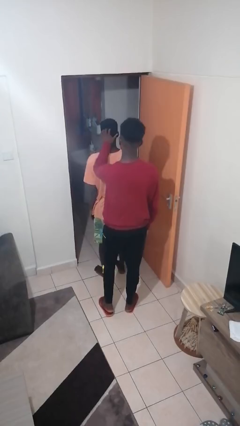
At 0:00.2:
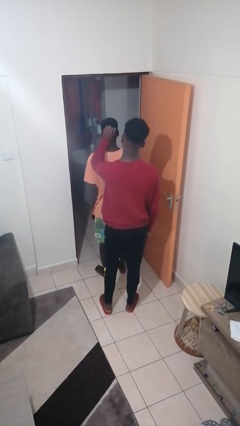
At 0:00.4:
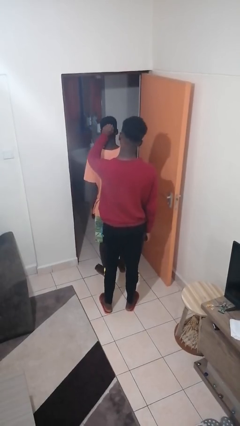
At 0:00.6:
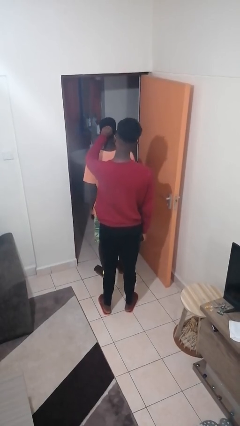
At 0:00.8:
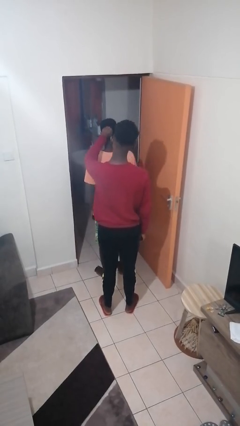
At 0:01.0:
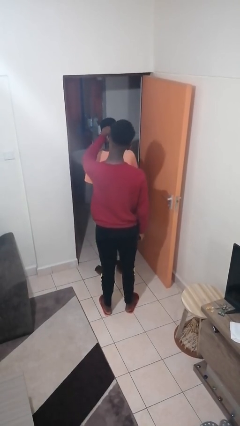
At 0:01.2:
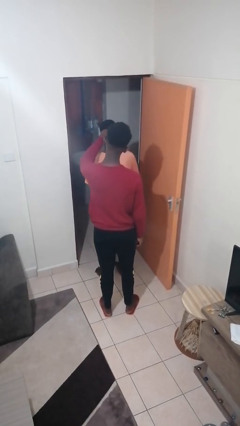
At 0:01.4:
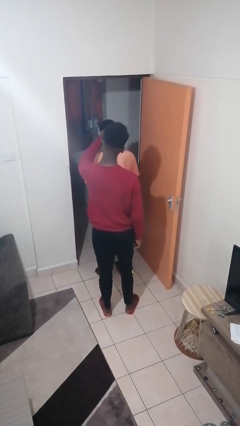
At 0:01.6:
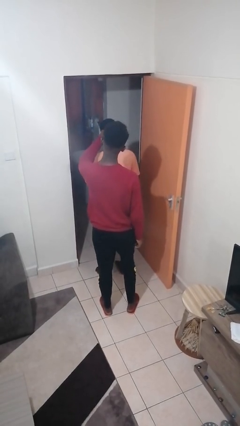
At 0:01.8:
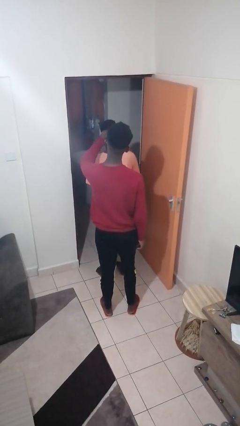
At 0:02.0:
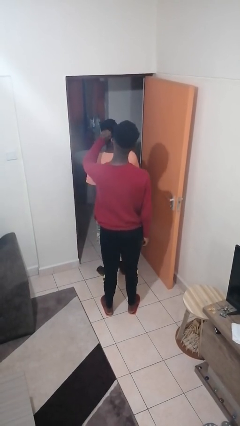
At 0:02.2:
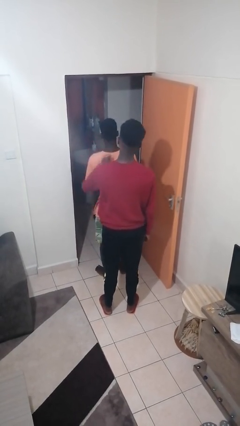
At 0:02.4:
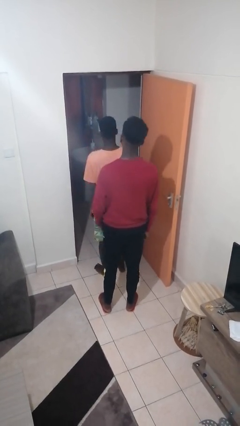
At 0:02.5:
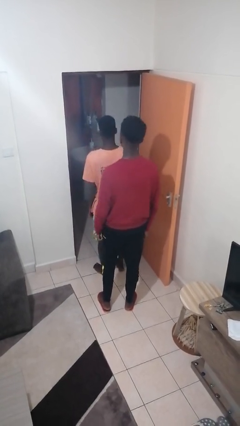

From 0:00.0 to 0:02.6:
person grabs person by hair

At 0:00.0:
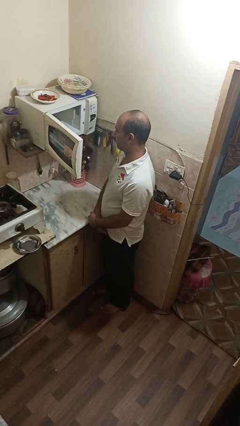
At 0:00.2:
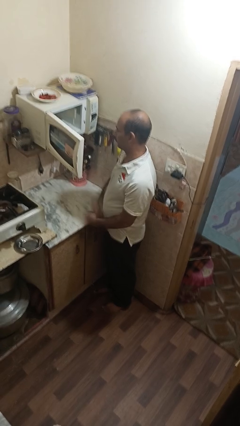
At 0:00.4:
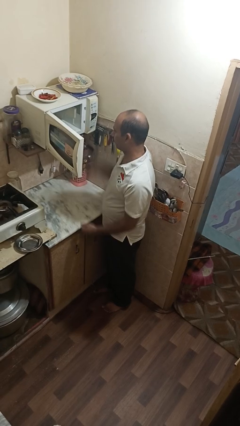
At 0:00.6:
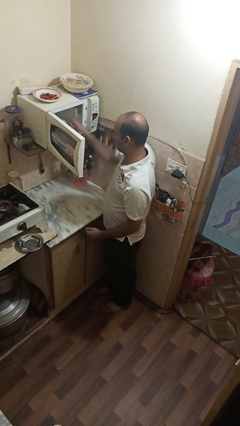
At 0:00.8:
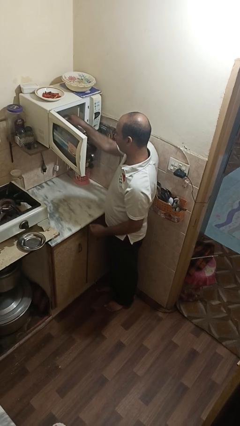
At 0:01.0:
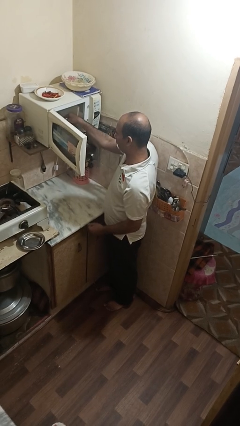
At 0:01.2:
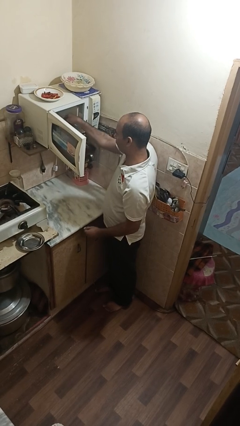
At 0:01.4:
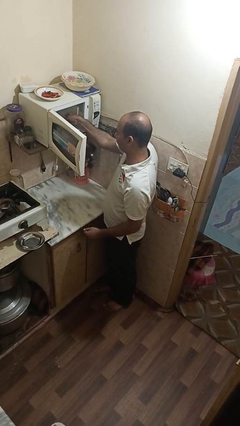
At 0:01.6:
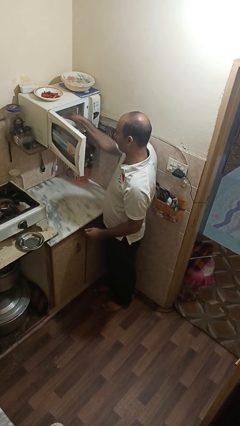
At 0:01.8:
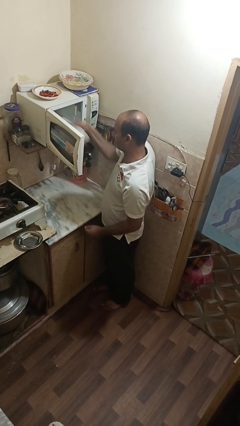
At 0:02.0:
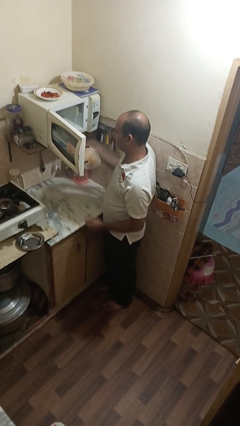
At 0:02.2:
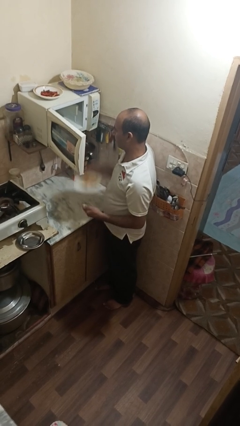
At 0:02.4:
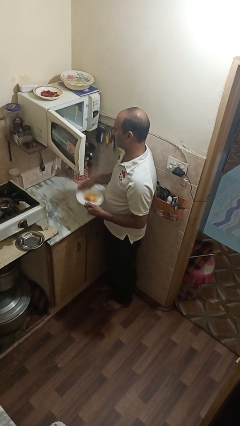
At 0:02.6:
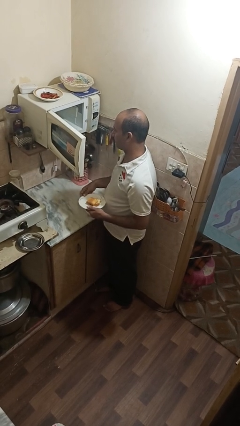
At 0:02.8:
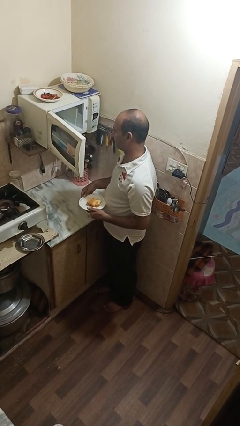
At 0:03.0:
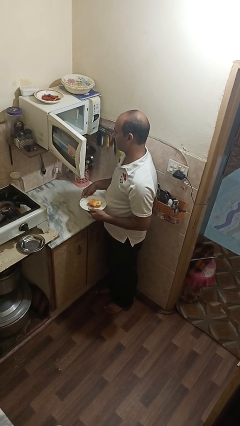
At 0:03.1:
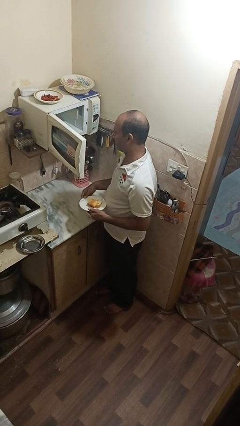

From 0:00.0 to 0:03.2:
person takes object from microwave

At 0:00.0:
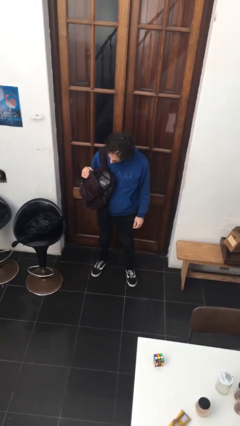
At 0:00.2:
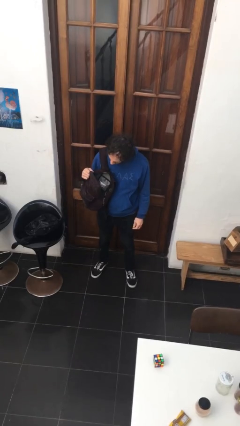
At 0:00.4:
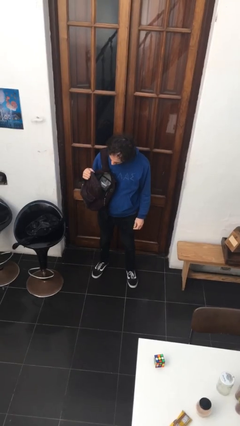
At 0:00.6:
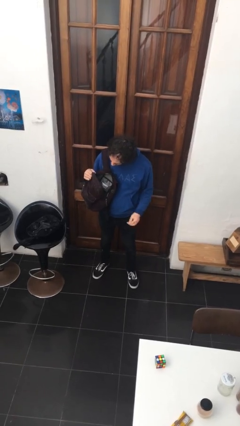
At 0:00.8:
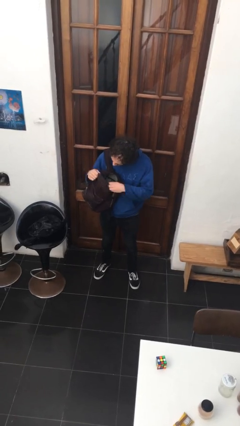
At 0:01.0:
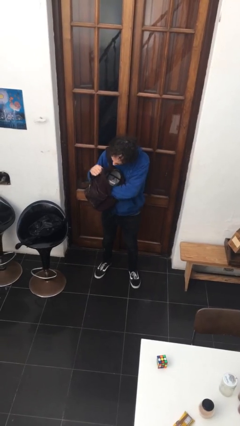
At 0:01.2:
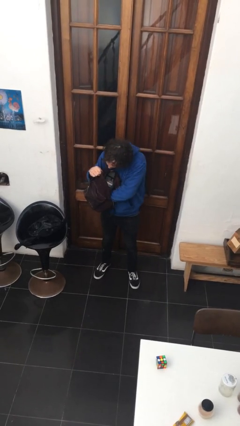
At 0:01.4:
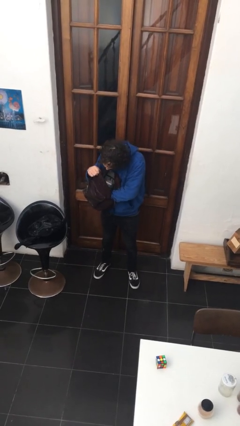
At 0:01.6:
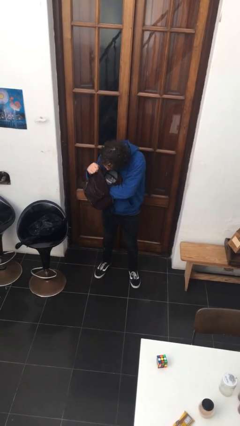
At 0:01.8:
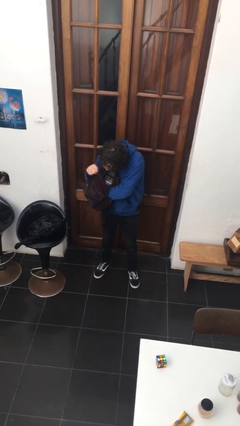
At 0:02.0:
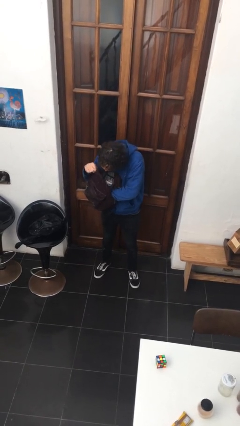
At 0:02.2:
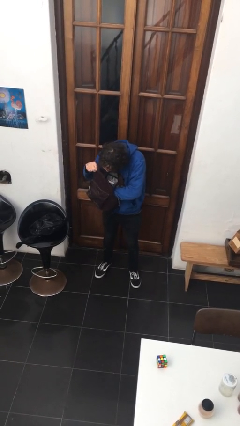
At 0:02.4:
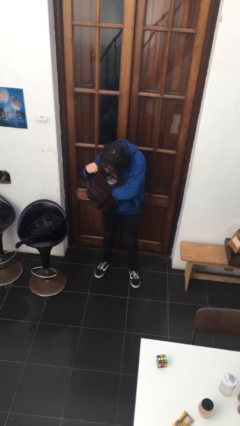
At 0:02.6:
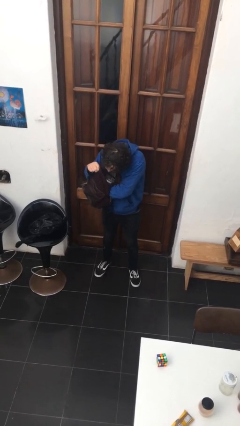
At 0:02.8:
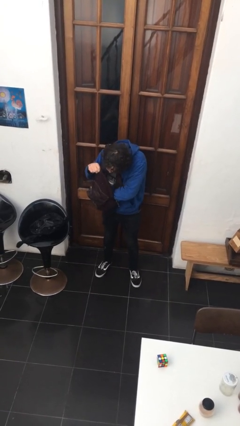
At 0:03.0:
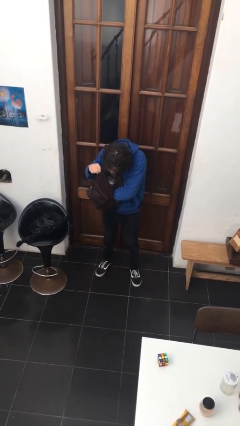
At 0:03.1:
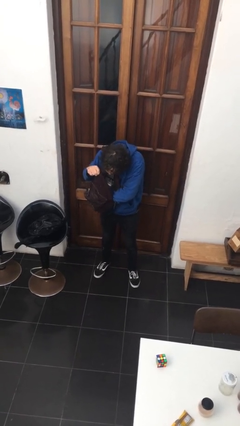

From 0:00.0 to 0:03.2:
person searches in backpack

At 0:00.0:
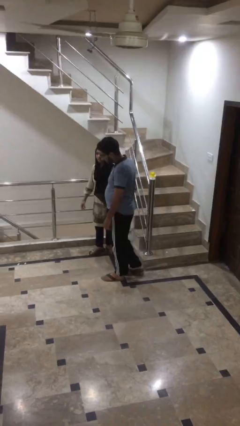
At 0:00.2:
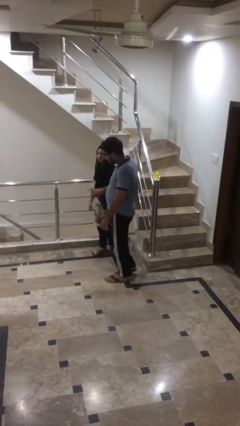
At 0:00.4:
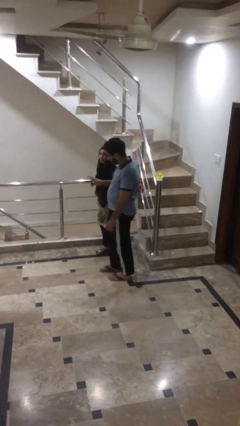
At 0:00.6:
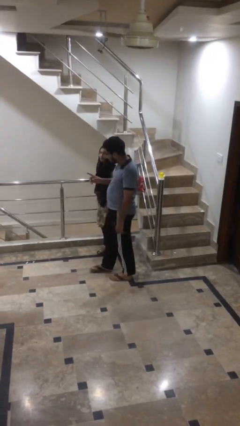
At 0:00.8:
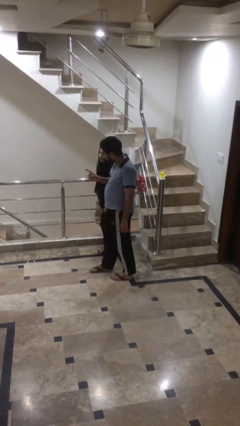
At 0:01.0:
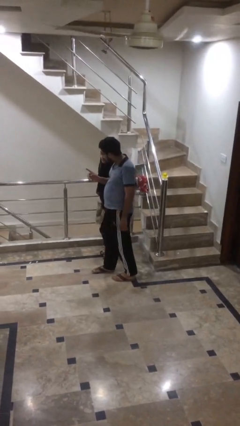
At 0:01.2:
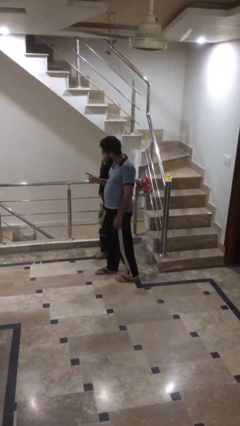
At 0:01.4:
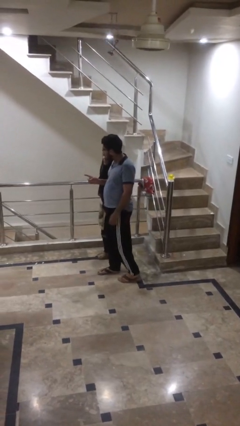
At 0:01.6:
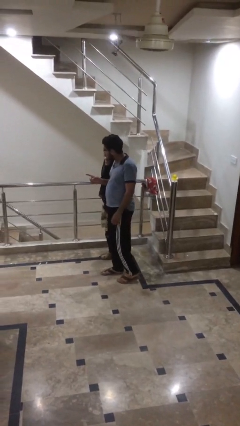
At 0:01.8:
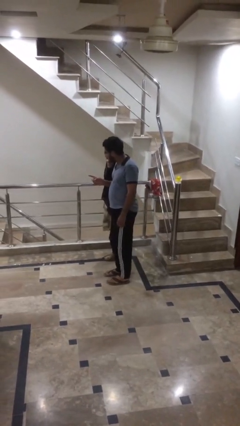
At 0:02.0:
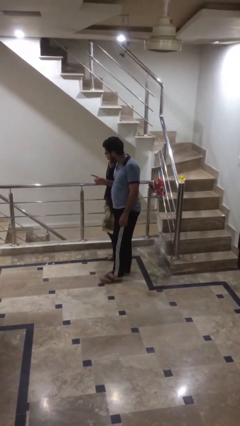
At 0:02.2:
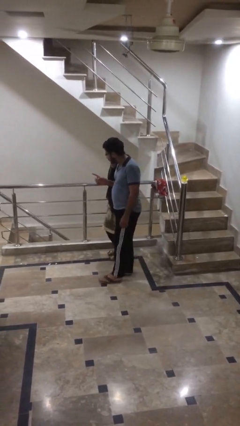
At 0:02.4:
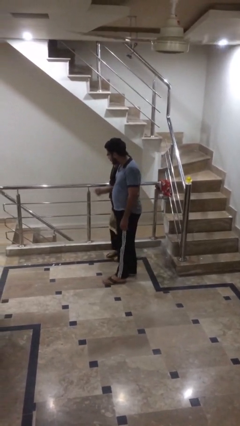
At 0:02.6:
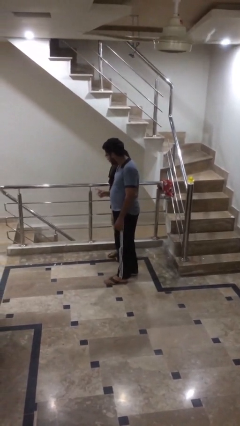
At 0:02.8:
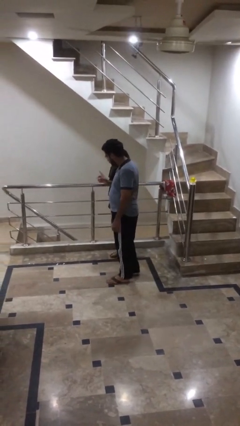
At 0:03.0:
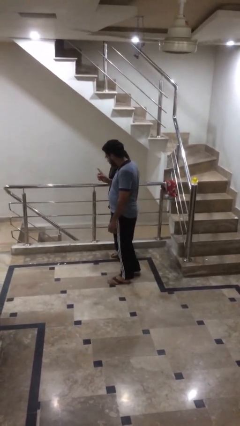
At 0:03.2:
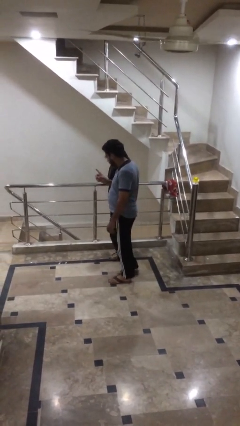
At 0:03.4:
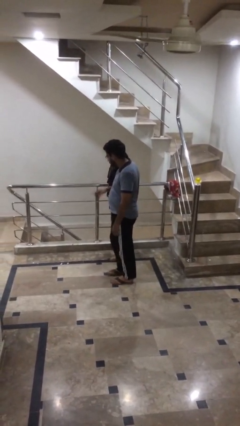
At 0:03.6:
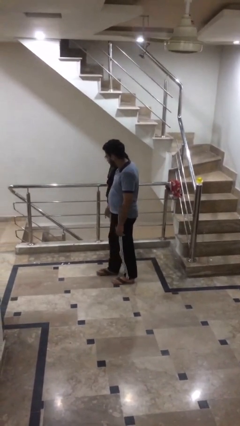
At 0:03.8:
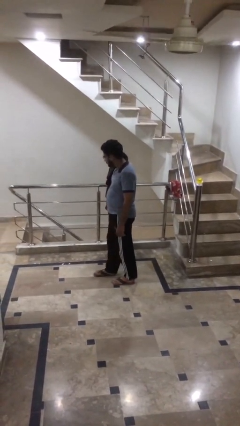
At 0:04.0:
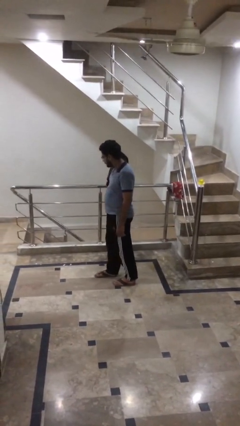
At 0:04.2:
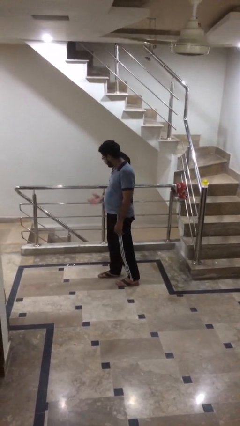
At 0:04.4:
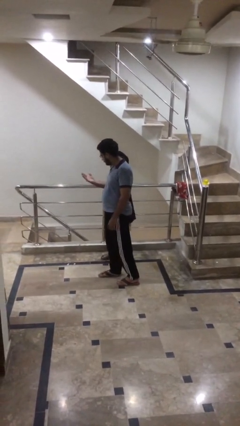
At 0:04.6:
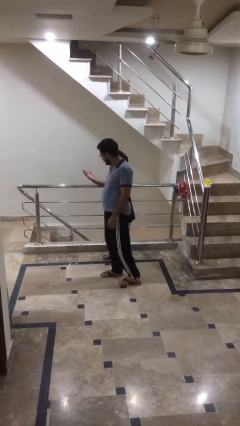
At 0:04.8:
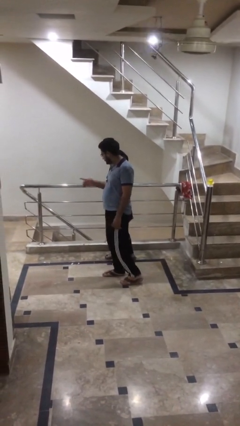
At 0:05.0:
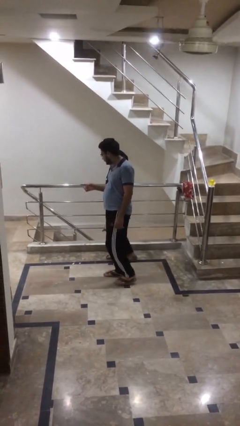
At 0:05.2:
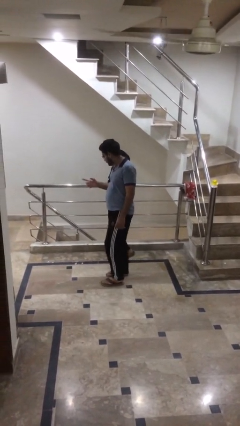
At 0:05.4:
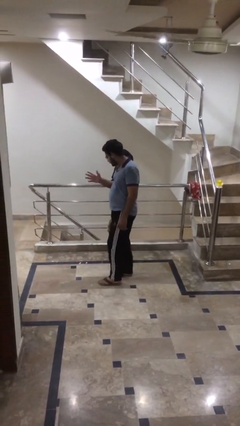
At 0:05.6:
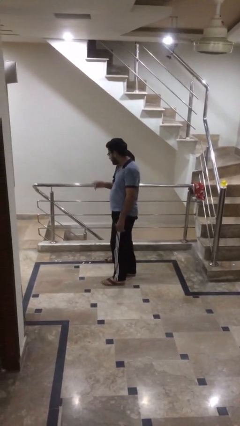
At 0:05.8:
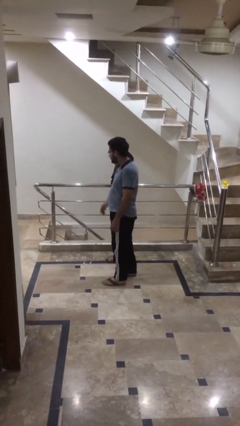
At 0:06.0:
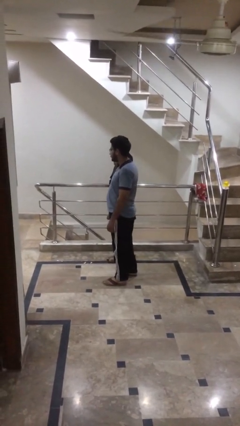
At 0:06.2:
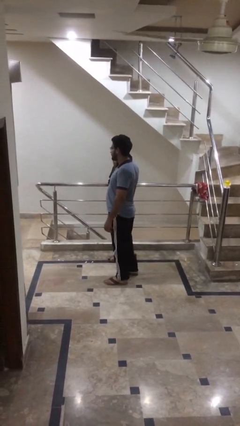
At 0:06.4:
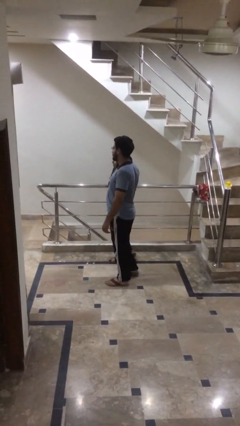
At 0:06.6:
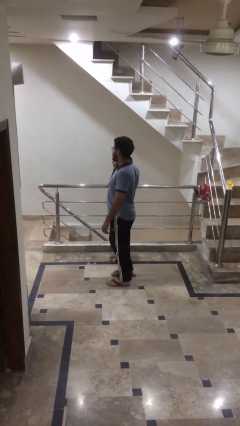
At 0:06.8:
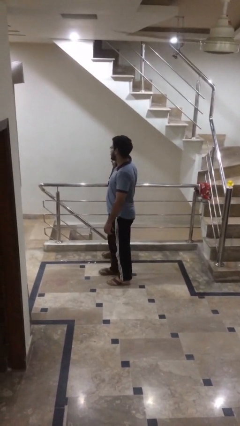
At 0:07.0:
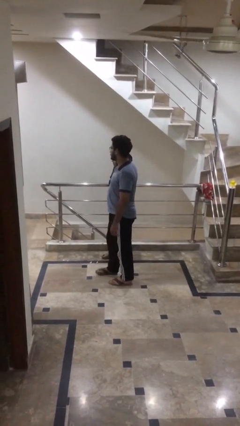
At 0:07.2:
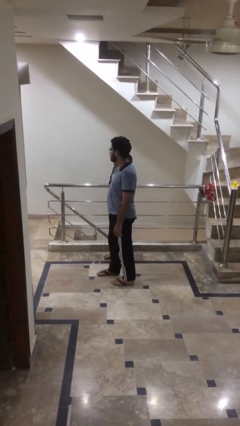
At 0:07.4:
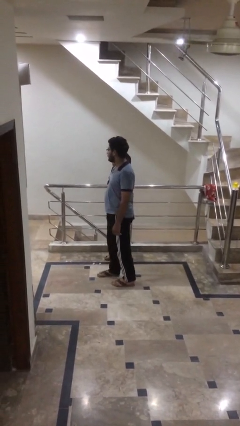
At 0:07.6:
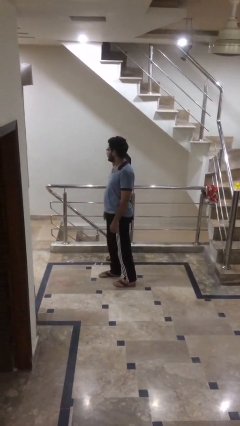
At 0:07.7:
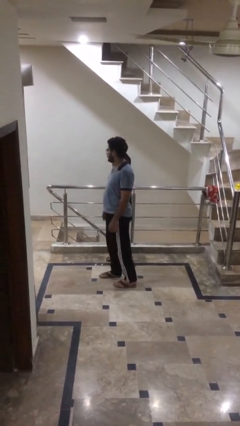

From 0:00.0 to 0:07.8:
person talks to person

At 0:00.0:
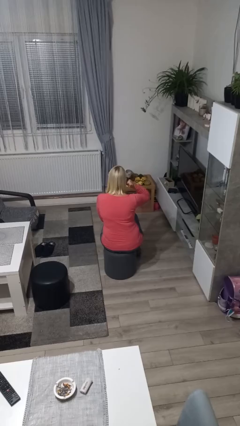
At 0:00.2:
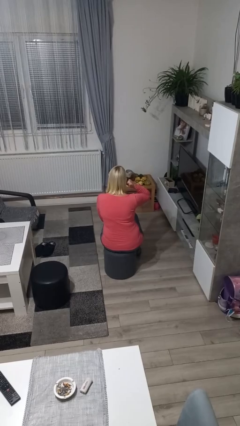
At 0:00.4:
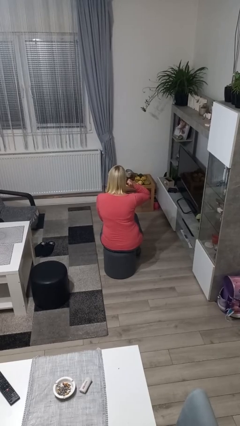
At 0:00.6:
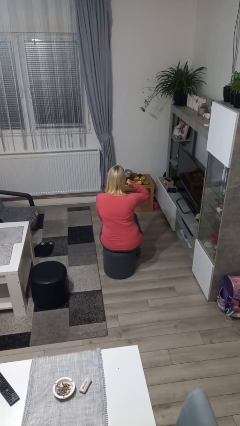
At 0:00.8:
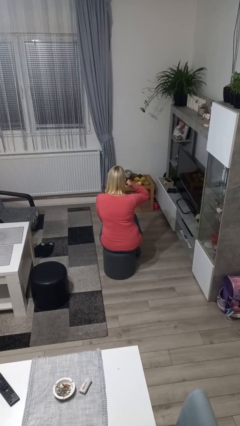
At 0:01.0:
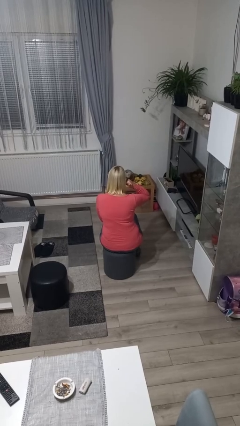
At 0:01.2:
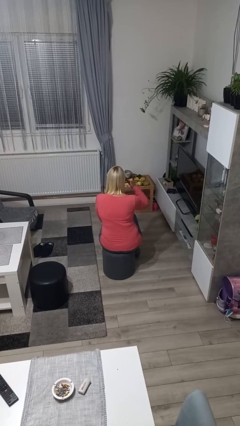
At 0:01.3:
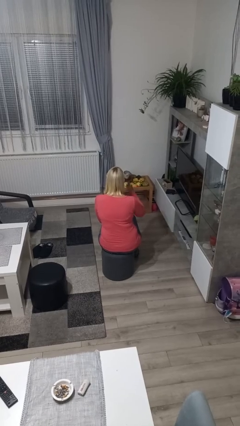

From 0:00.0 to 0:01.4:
person gestures call me
